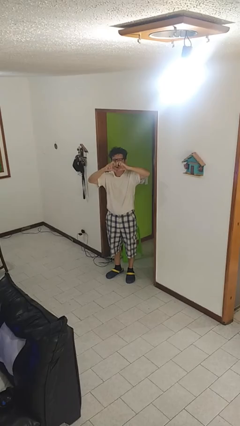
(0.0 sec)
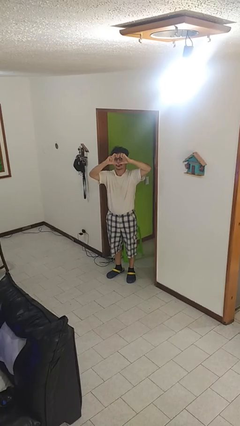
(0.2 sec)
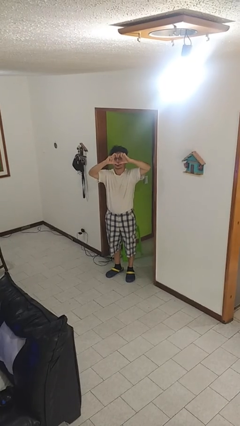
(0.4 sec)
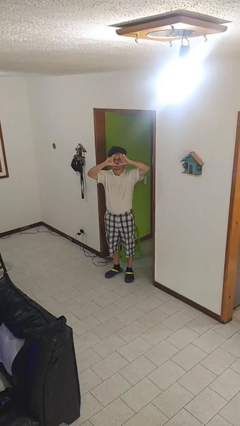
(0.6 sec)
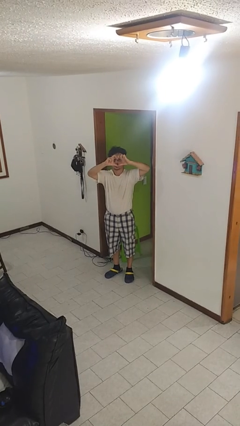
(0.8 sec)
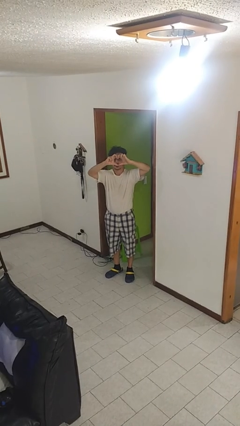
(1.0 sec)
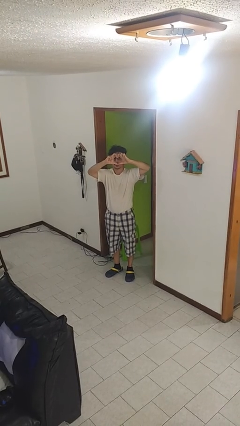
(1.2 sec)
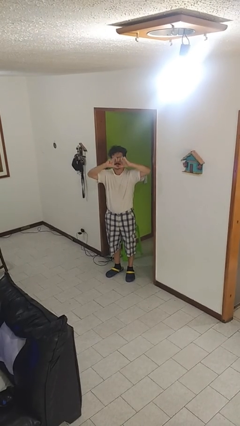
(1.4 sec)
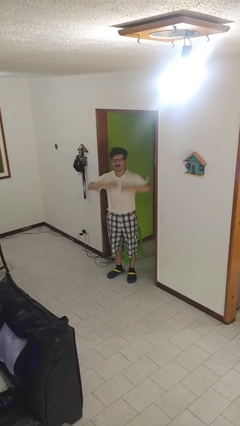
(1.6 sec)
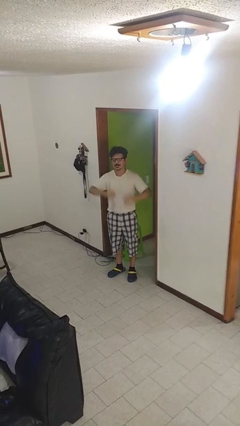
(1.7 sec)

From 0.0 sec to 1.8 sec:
person gestures heart

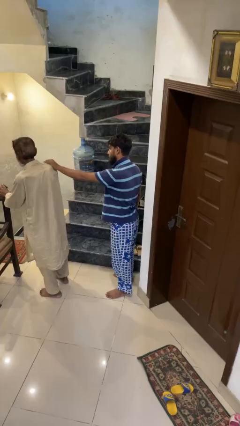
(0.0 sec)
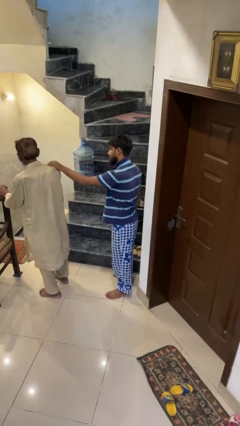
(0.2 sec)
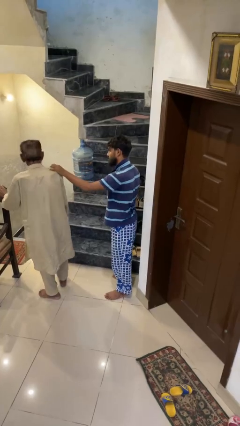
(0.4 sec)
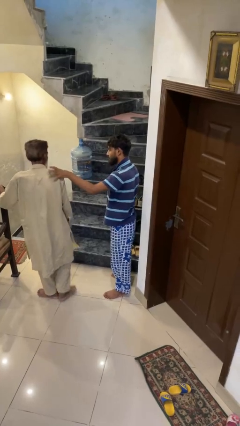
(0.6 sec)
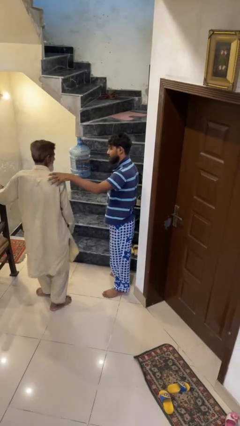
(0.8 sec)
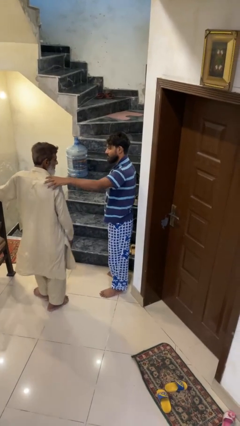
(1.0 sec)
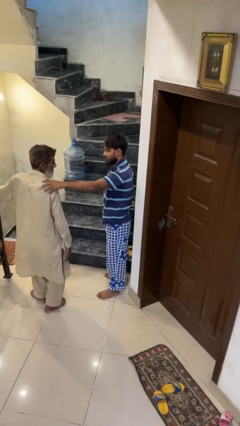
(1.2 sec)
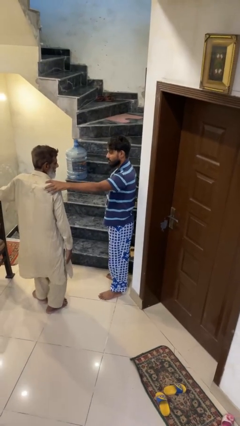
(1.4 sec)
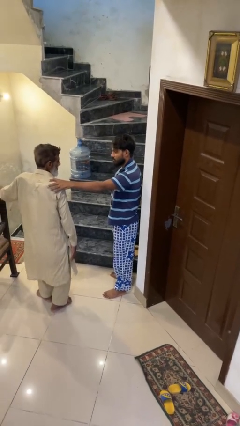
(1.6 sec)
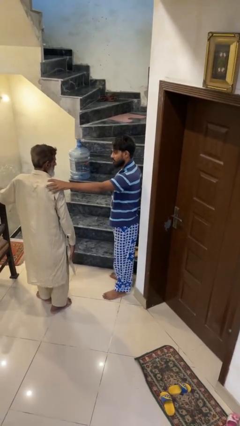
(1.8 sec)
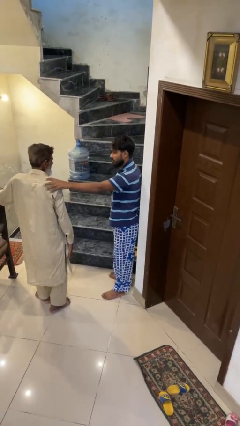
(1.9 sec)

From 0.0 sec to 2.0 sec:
person spins person around

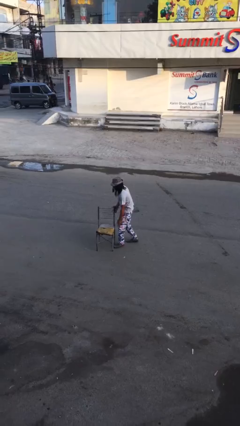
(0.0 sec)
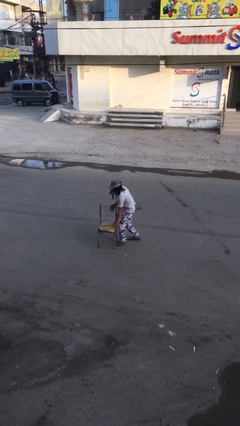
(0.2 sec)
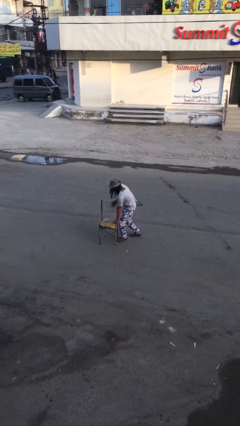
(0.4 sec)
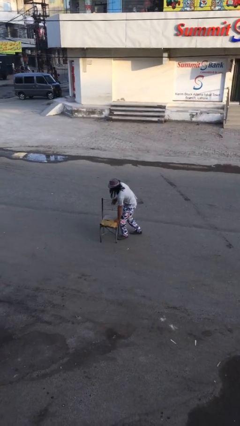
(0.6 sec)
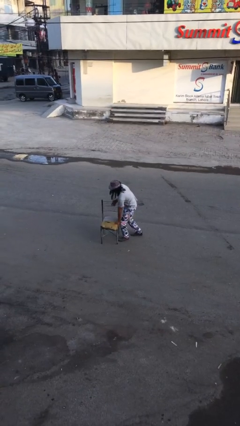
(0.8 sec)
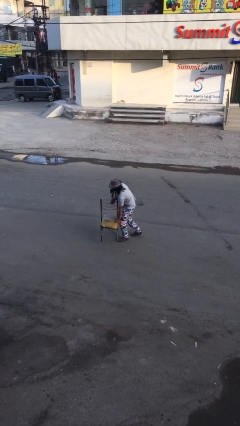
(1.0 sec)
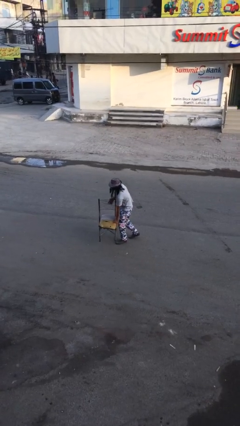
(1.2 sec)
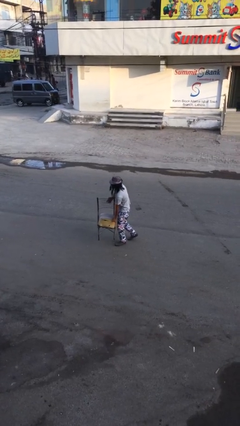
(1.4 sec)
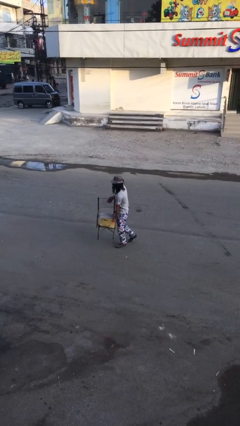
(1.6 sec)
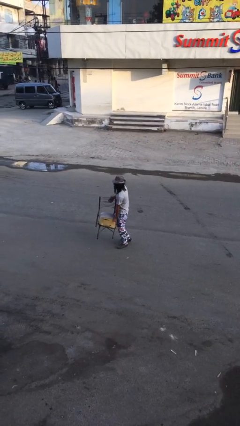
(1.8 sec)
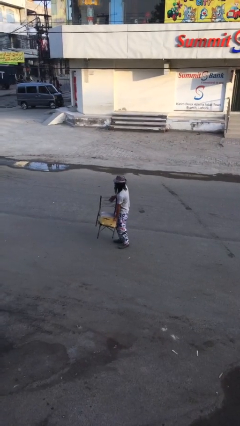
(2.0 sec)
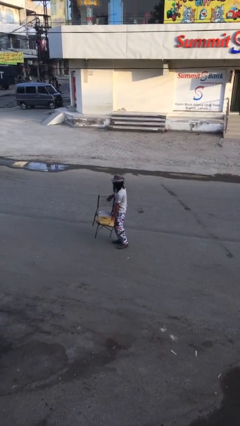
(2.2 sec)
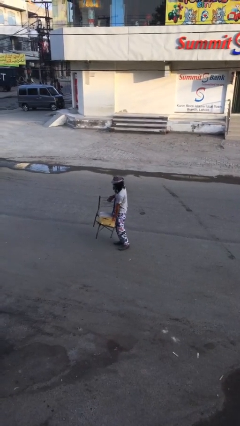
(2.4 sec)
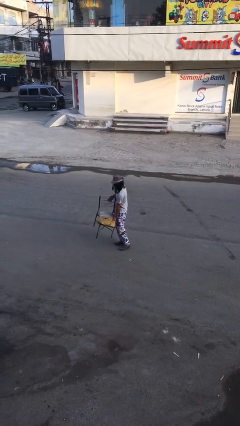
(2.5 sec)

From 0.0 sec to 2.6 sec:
person picks up object from floor

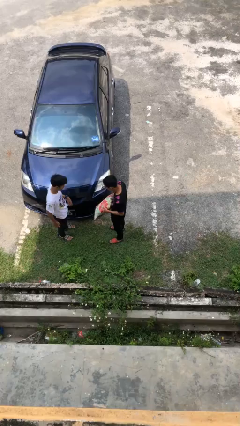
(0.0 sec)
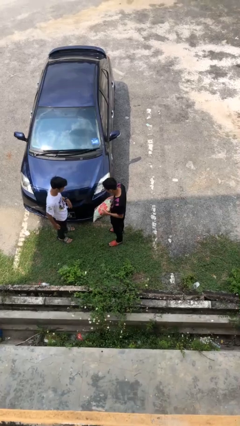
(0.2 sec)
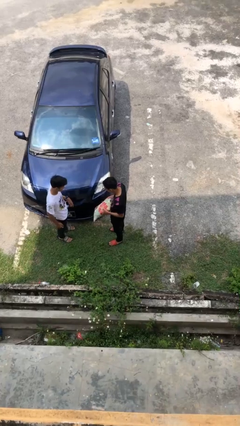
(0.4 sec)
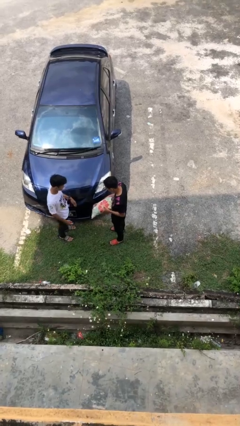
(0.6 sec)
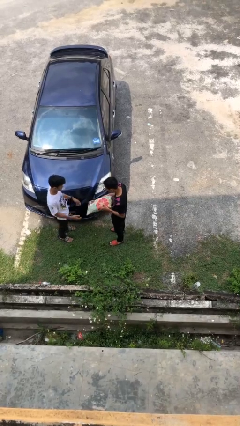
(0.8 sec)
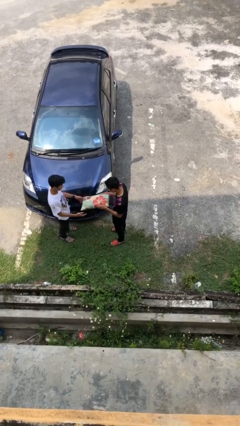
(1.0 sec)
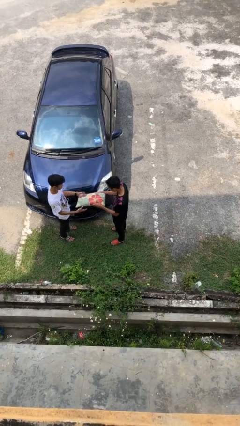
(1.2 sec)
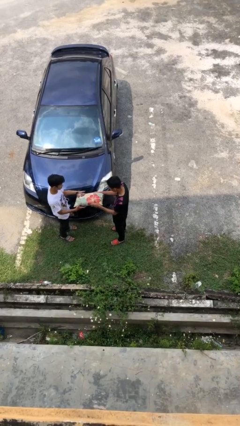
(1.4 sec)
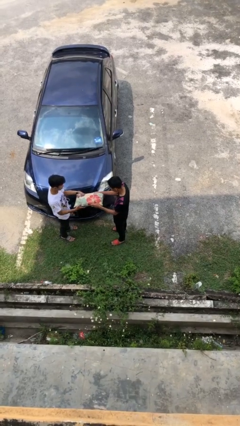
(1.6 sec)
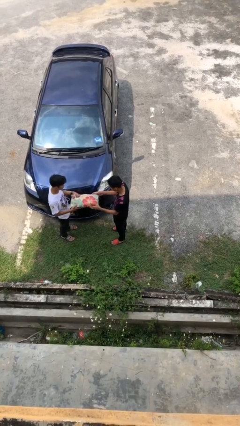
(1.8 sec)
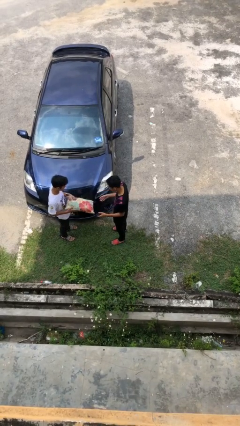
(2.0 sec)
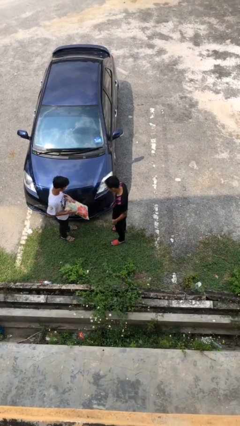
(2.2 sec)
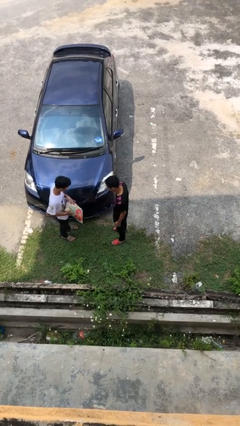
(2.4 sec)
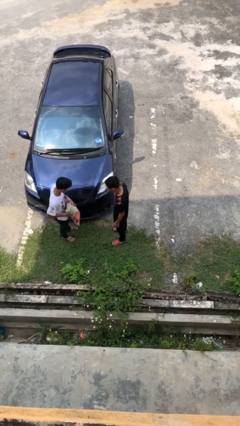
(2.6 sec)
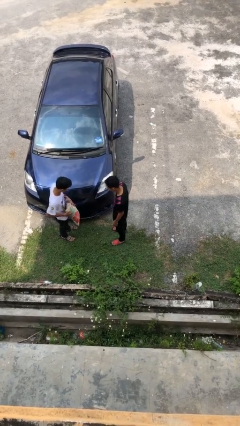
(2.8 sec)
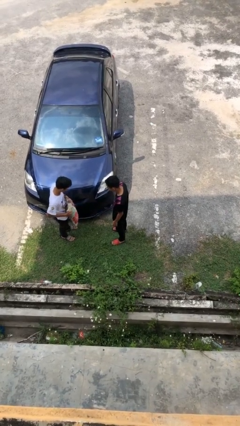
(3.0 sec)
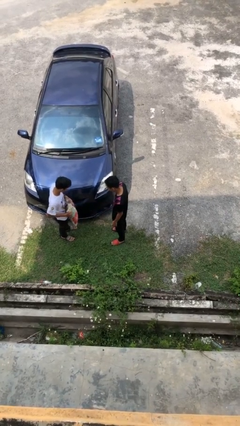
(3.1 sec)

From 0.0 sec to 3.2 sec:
person transfers object to person

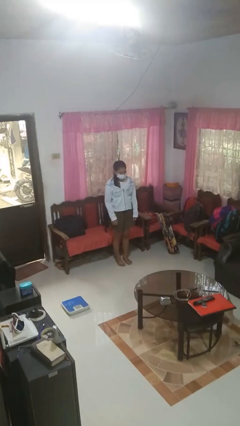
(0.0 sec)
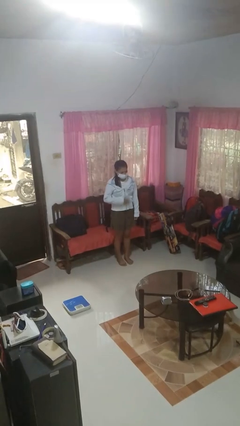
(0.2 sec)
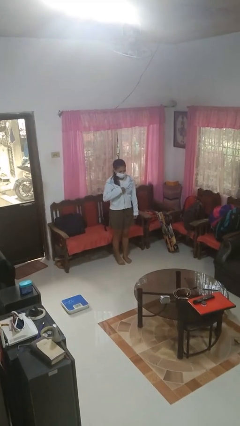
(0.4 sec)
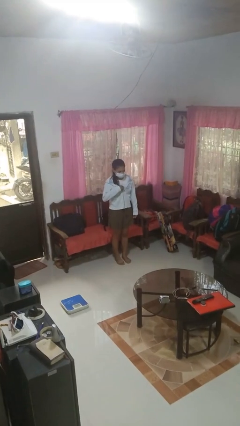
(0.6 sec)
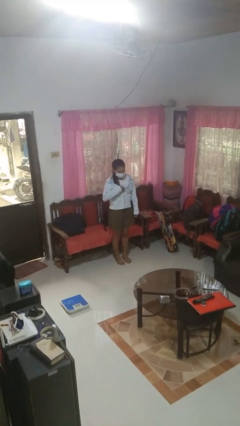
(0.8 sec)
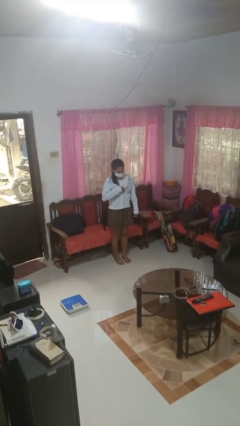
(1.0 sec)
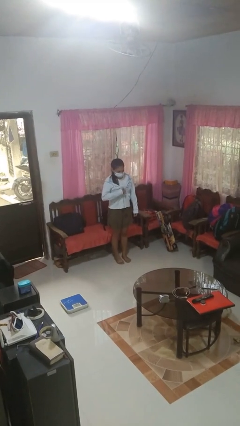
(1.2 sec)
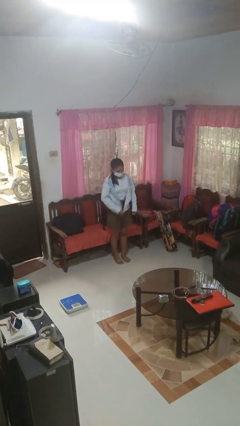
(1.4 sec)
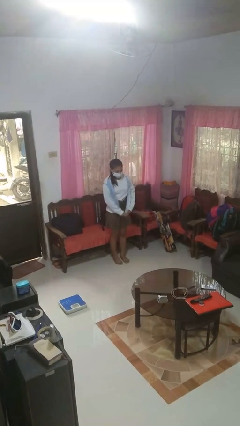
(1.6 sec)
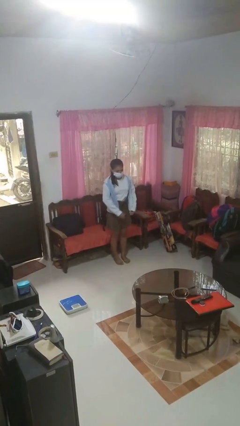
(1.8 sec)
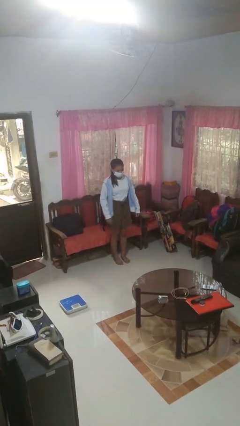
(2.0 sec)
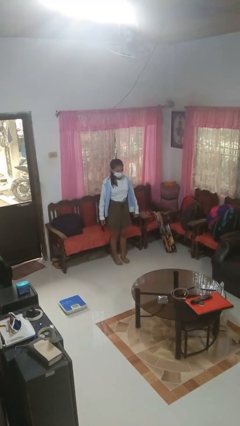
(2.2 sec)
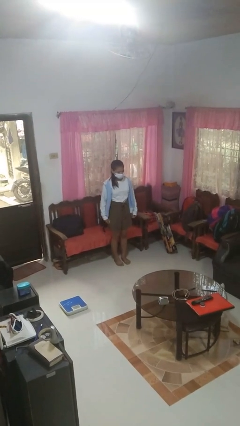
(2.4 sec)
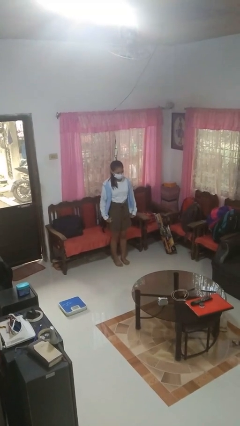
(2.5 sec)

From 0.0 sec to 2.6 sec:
person unzips jacket

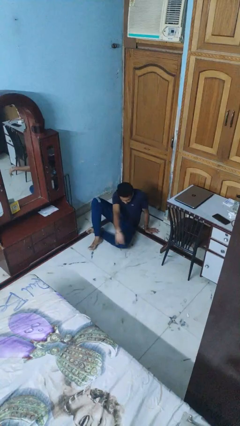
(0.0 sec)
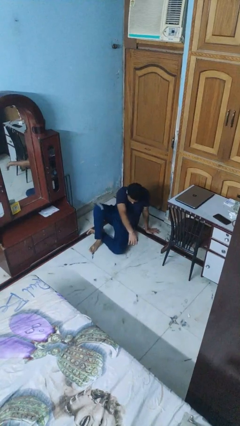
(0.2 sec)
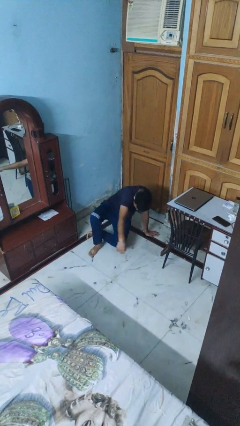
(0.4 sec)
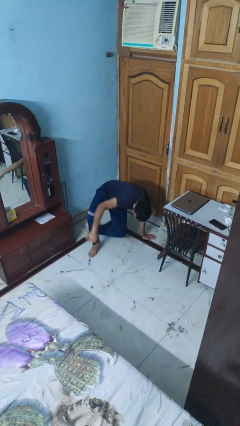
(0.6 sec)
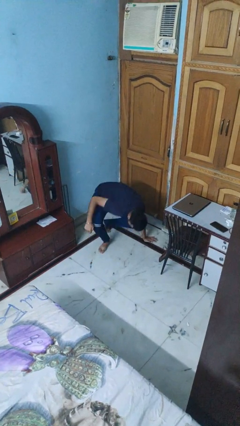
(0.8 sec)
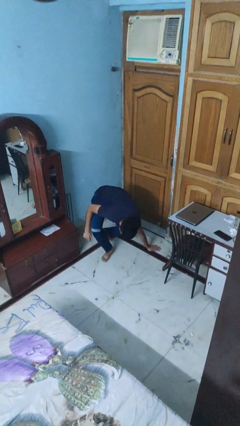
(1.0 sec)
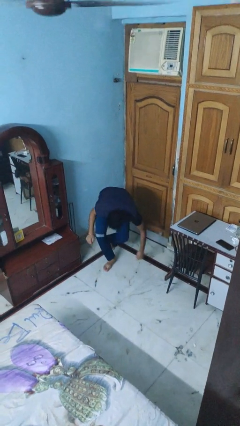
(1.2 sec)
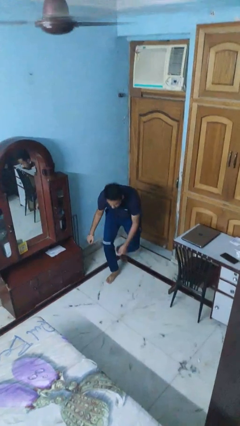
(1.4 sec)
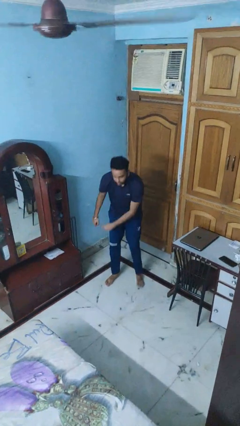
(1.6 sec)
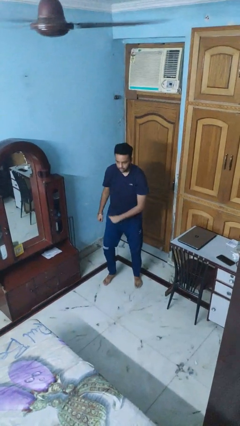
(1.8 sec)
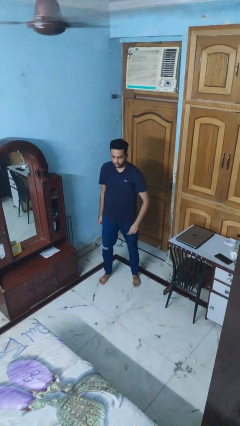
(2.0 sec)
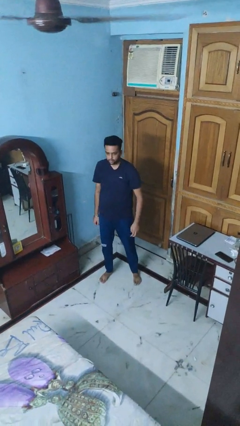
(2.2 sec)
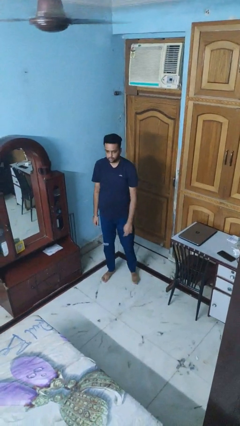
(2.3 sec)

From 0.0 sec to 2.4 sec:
person stands up from floor

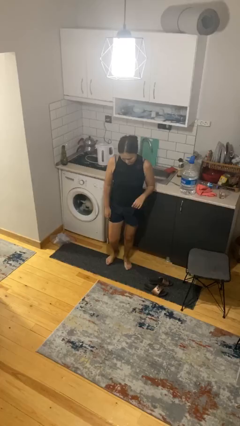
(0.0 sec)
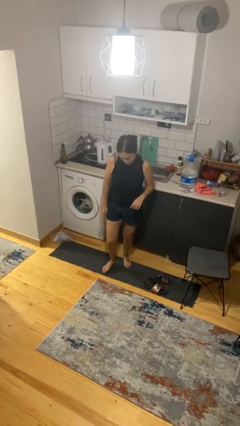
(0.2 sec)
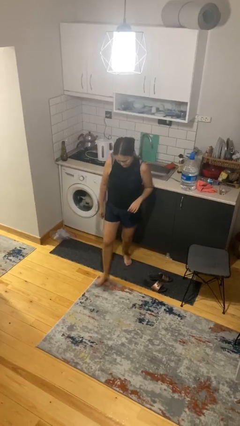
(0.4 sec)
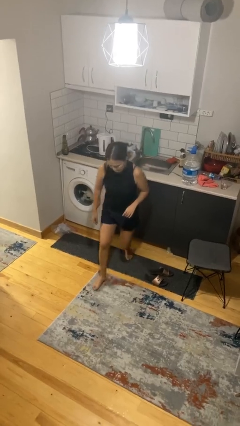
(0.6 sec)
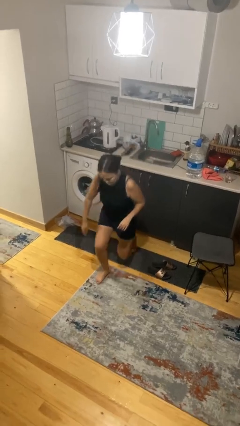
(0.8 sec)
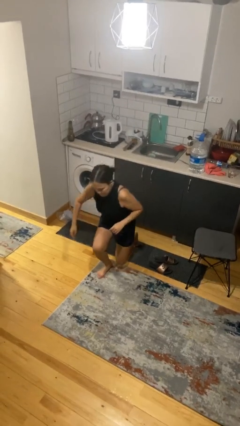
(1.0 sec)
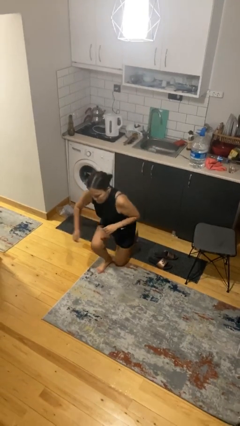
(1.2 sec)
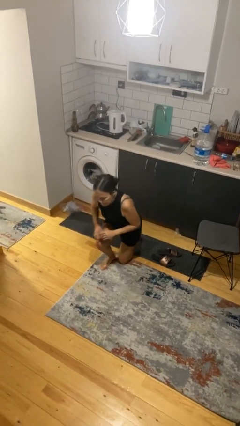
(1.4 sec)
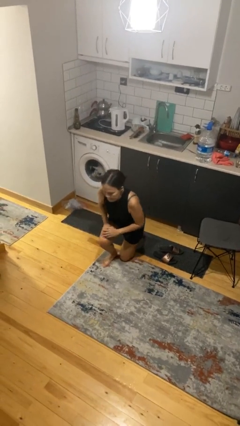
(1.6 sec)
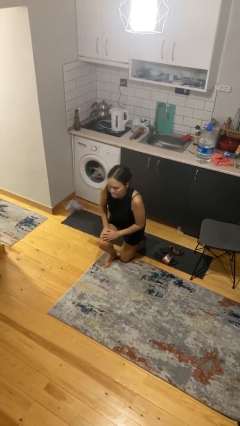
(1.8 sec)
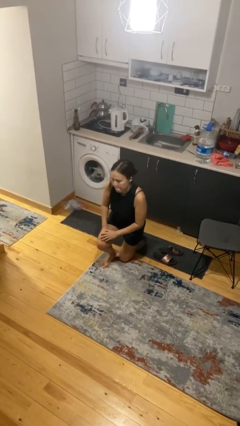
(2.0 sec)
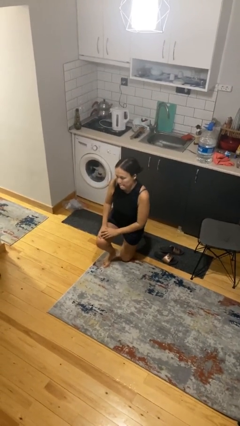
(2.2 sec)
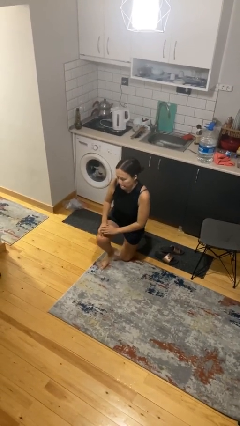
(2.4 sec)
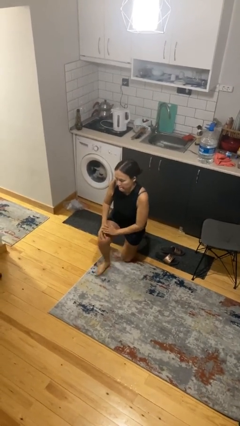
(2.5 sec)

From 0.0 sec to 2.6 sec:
person kneels
